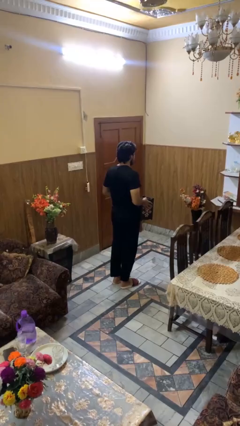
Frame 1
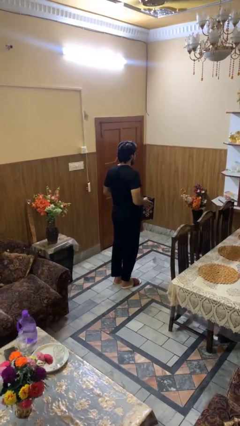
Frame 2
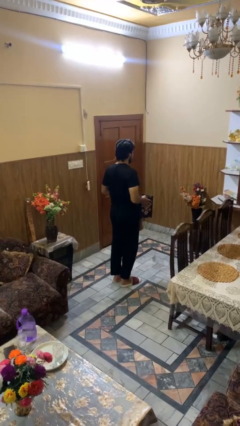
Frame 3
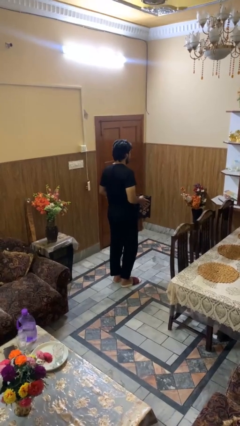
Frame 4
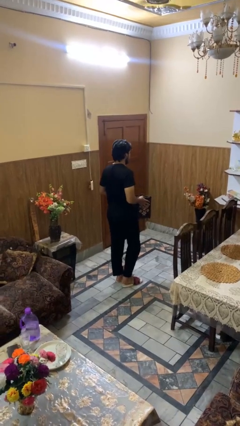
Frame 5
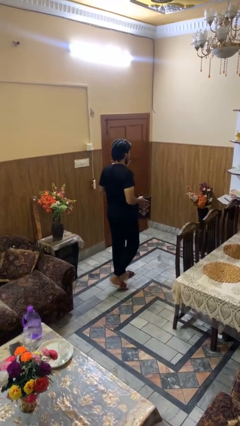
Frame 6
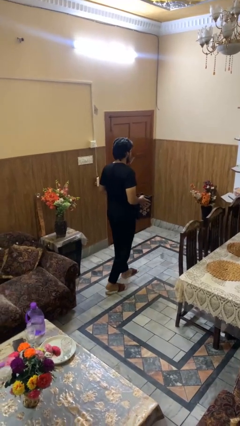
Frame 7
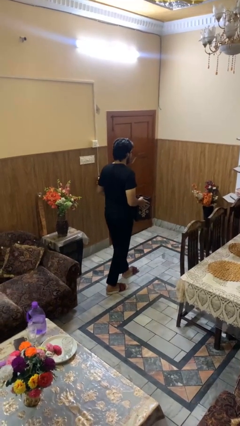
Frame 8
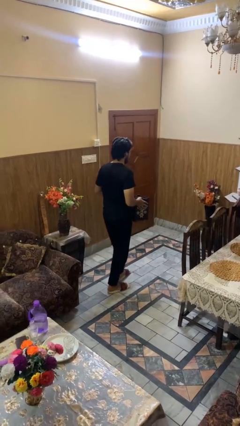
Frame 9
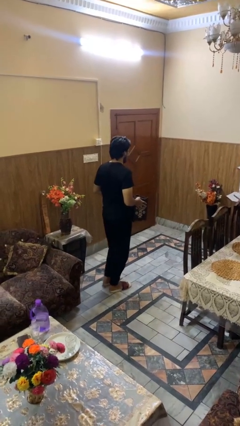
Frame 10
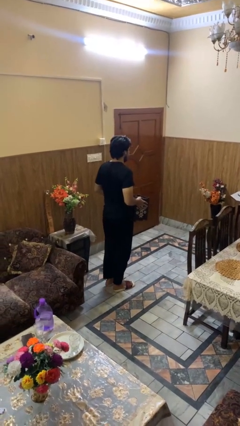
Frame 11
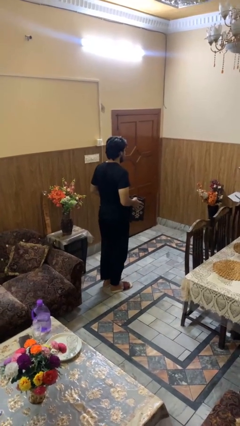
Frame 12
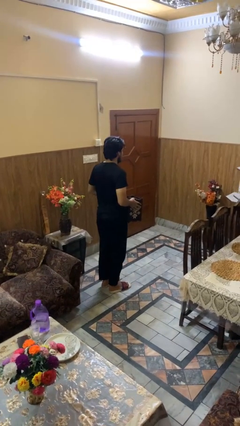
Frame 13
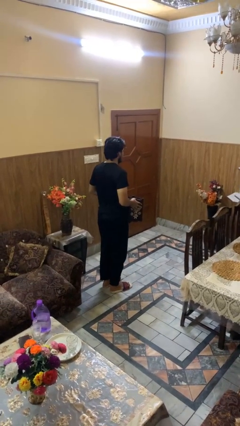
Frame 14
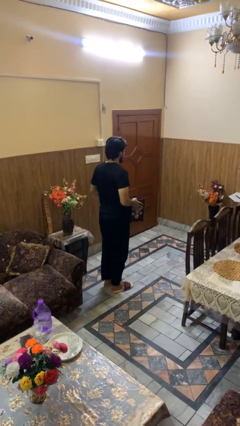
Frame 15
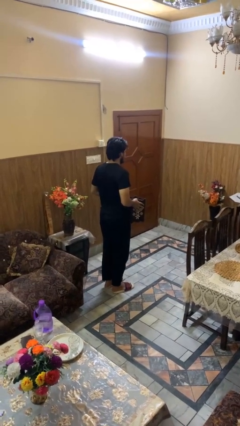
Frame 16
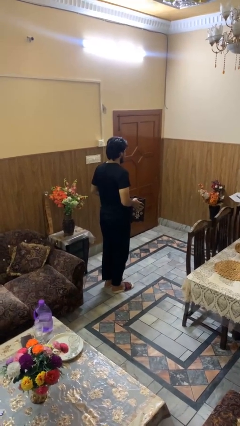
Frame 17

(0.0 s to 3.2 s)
person carries groceries

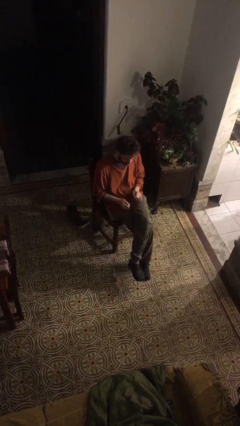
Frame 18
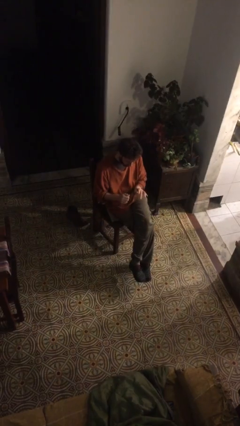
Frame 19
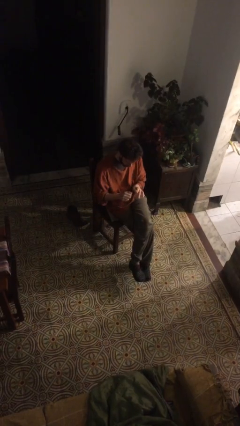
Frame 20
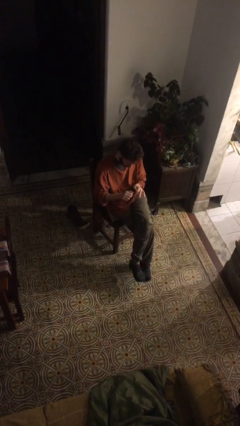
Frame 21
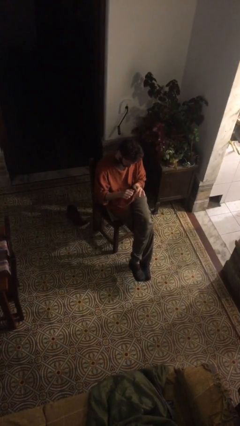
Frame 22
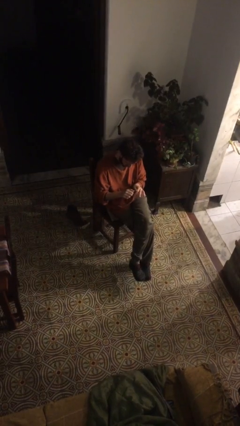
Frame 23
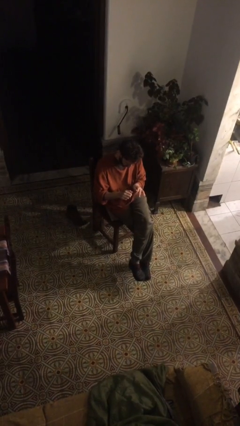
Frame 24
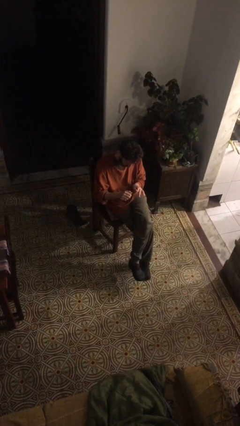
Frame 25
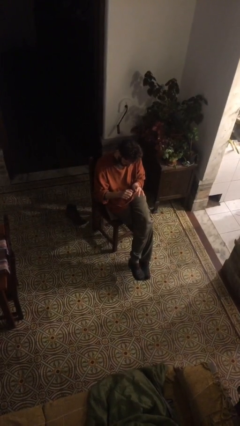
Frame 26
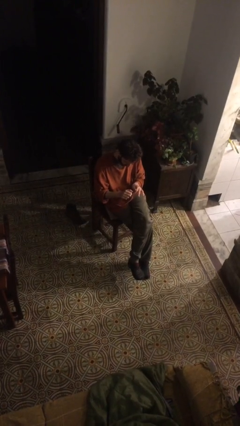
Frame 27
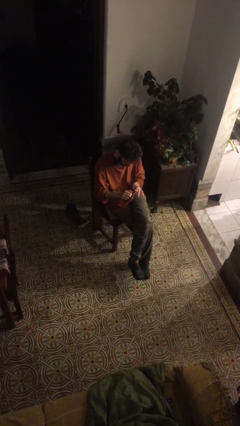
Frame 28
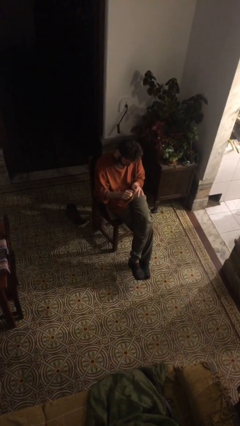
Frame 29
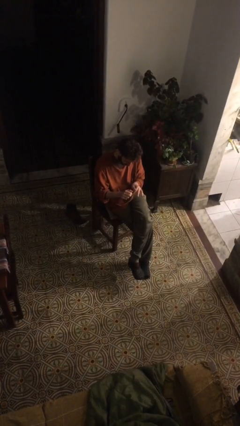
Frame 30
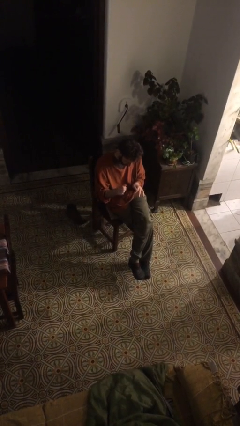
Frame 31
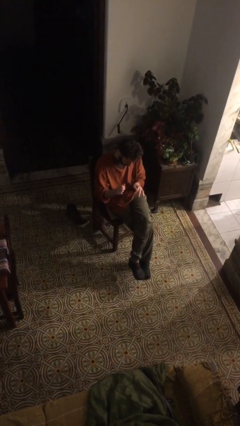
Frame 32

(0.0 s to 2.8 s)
person files fingernails

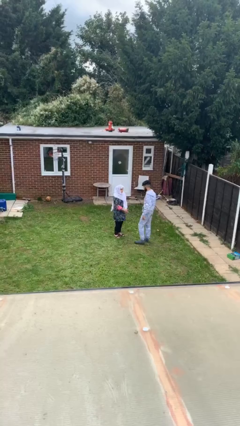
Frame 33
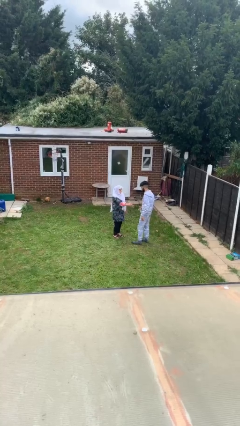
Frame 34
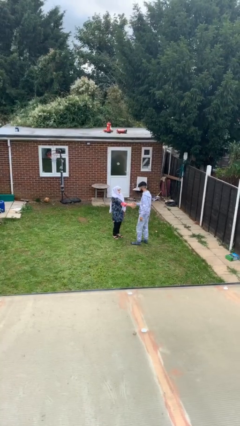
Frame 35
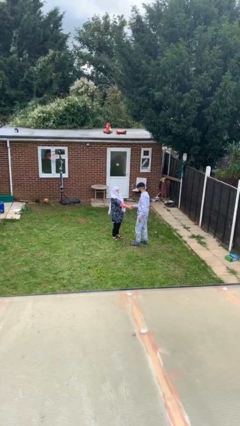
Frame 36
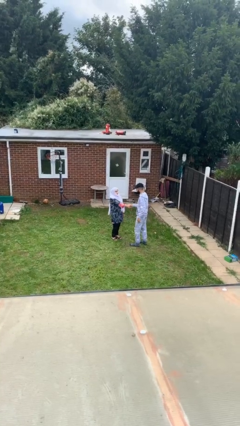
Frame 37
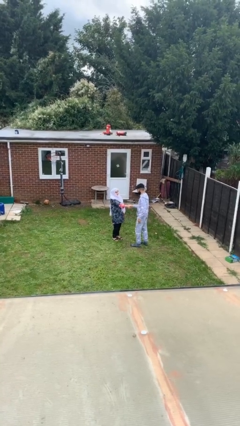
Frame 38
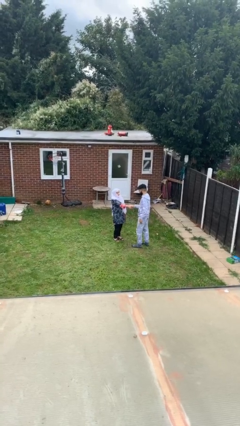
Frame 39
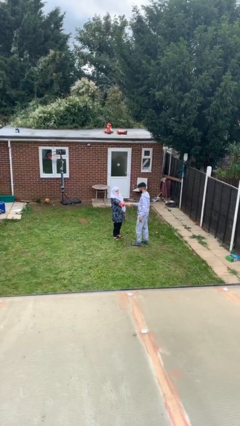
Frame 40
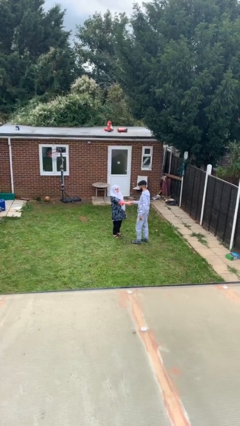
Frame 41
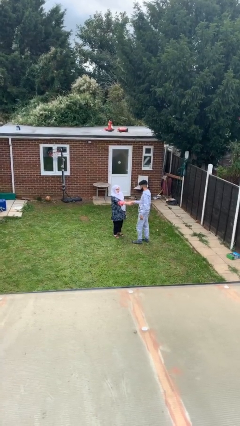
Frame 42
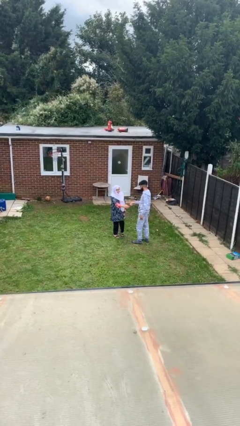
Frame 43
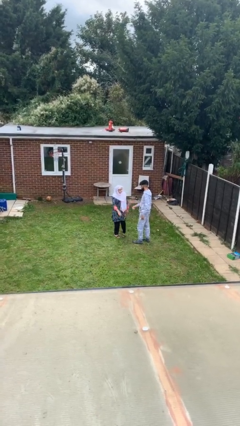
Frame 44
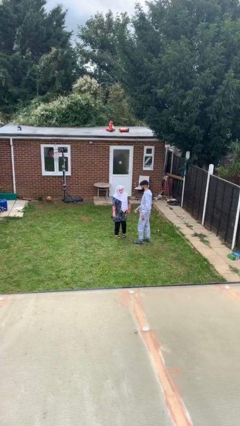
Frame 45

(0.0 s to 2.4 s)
person shakes hand

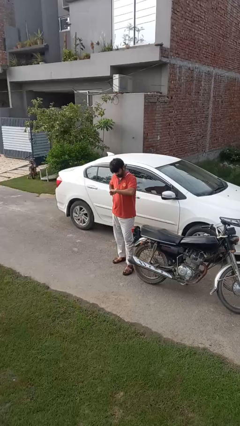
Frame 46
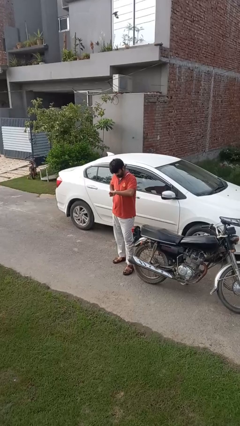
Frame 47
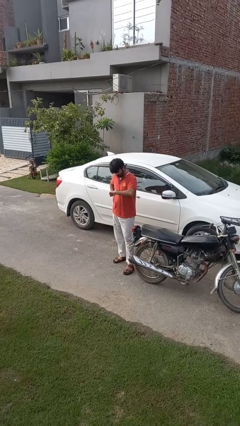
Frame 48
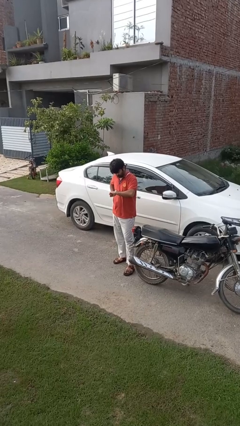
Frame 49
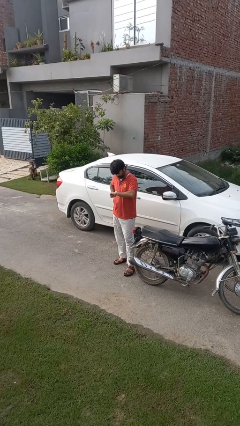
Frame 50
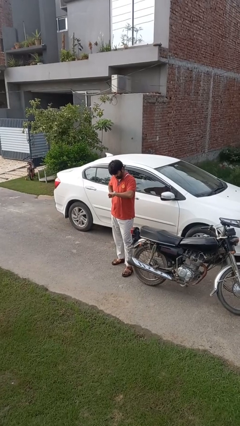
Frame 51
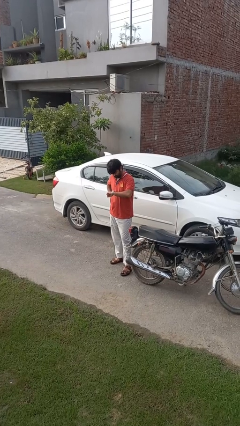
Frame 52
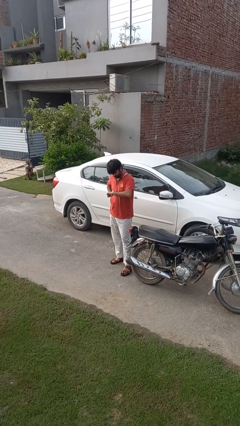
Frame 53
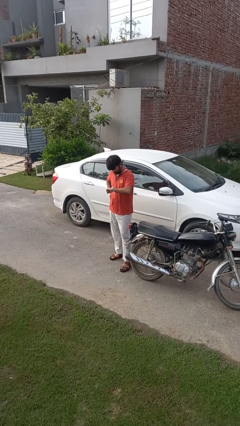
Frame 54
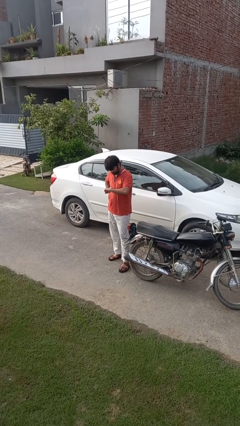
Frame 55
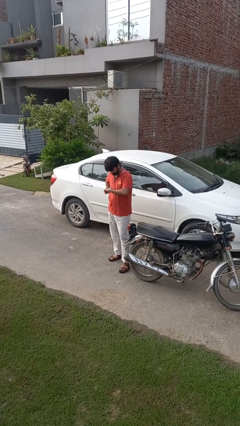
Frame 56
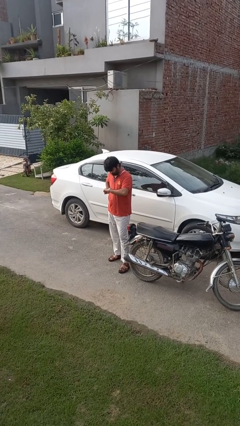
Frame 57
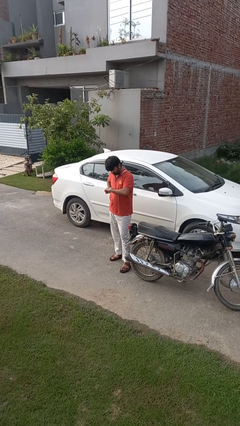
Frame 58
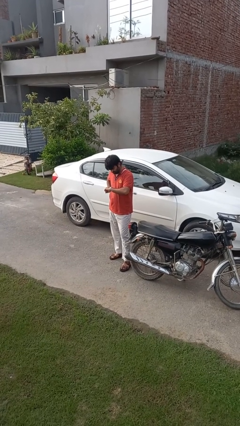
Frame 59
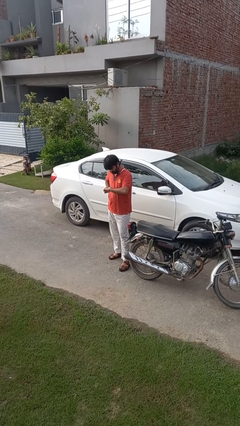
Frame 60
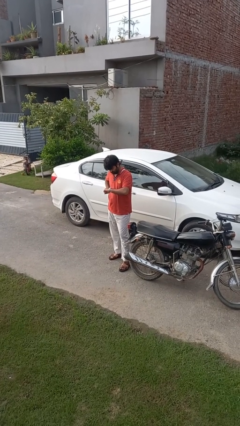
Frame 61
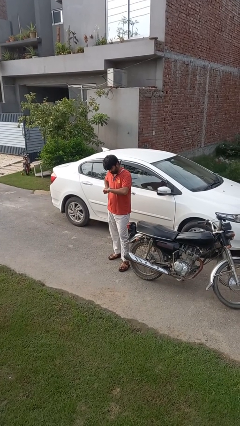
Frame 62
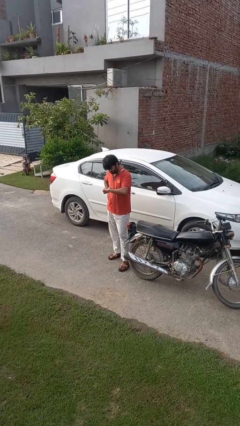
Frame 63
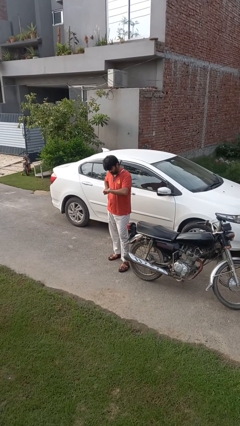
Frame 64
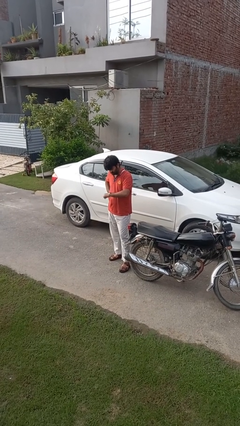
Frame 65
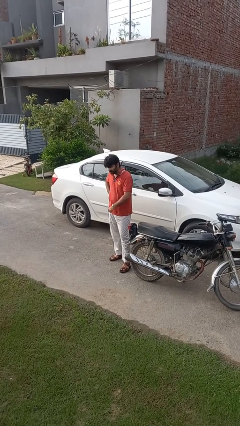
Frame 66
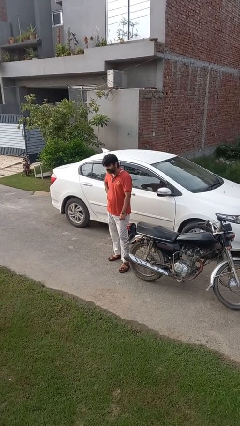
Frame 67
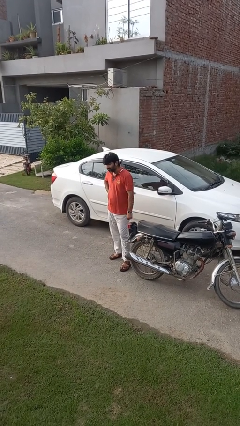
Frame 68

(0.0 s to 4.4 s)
person looks at wristwatch

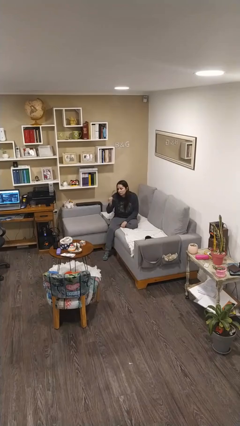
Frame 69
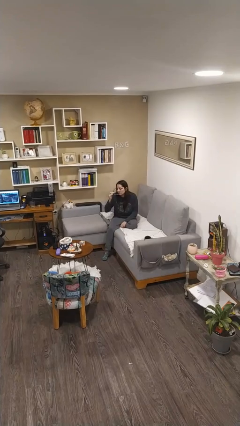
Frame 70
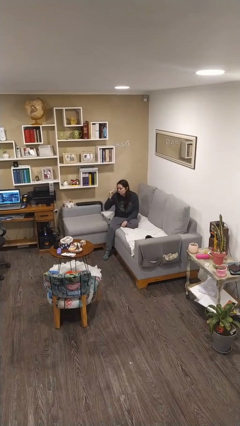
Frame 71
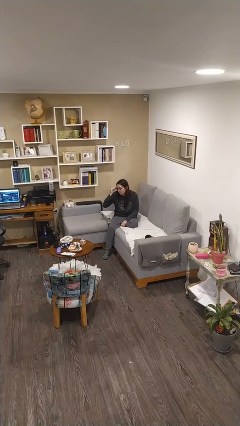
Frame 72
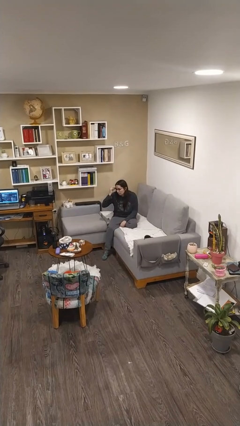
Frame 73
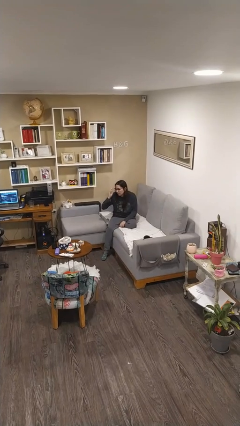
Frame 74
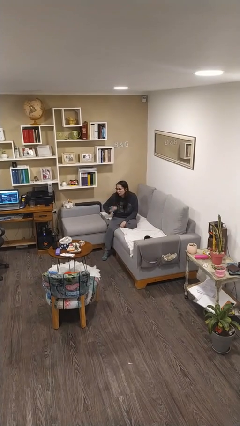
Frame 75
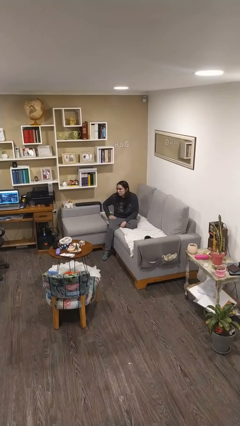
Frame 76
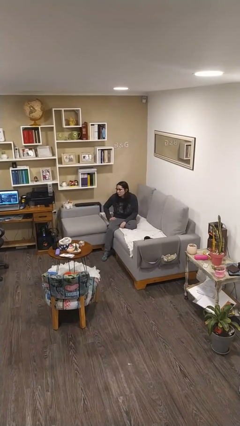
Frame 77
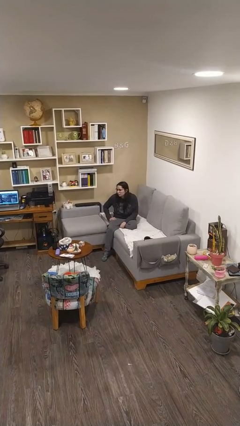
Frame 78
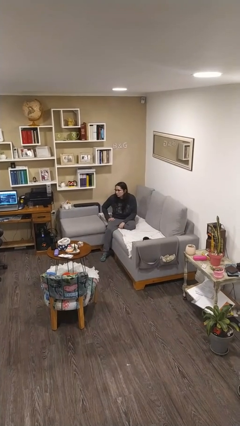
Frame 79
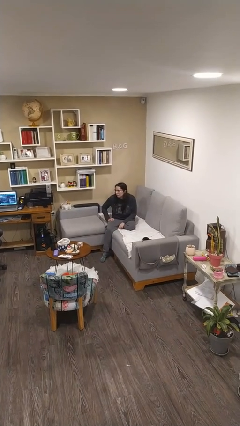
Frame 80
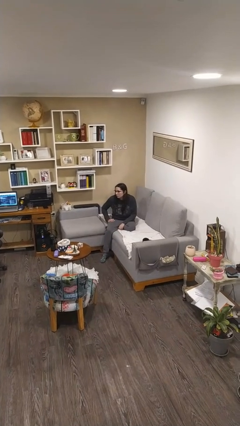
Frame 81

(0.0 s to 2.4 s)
person puts on glasses

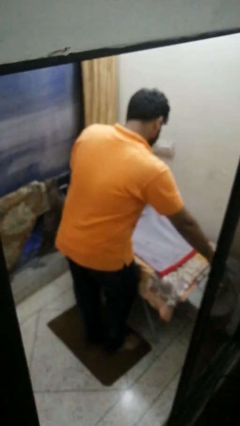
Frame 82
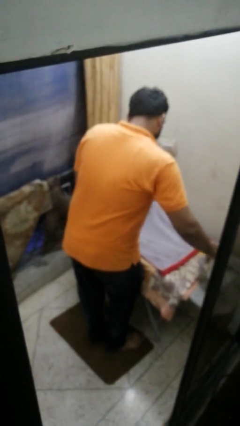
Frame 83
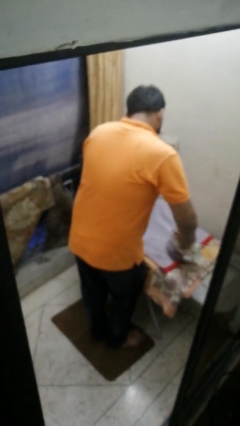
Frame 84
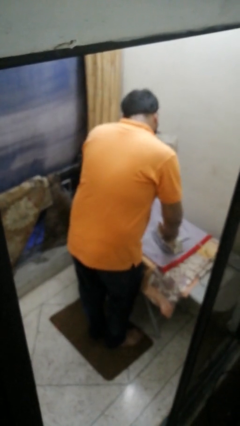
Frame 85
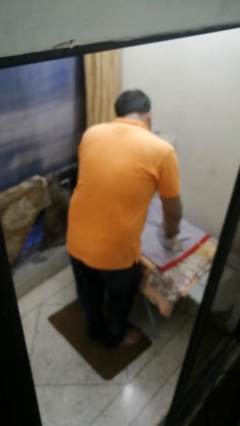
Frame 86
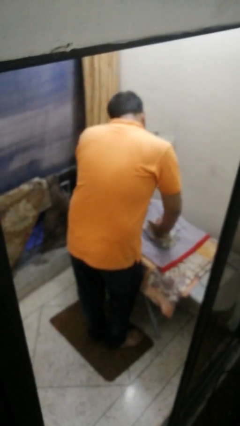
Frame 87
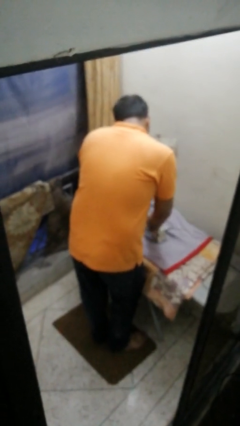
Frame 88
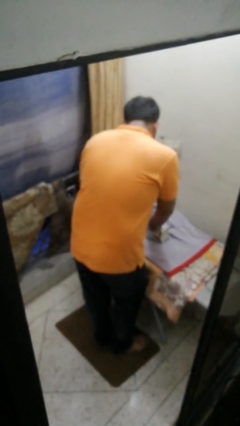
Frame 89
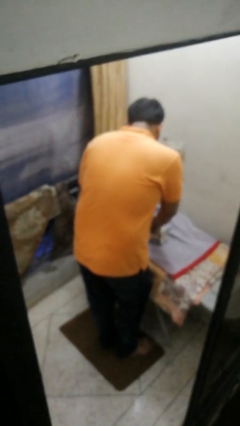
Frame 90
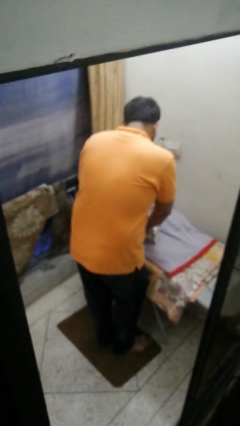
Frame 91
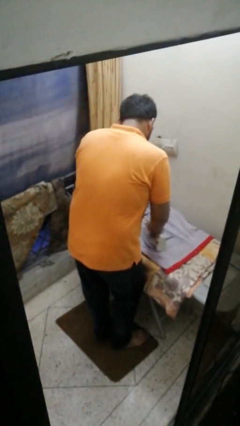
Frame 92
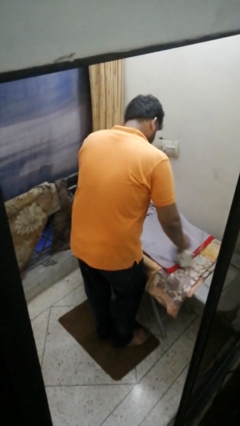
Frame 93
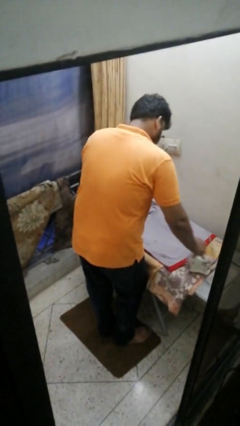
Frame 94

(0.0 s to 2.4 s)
person irons clothes
